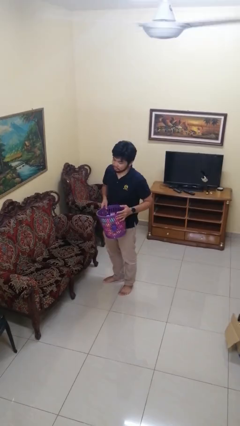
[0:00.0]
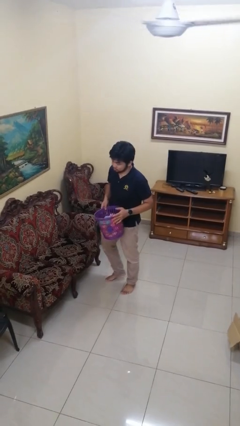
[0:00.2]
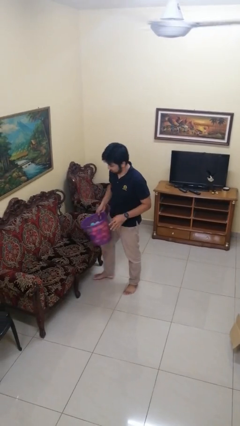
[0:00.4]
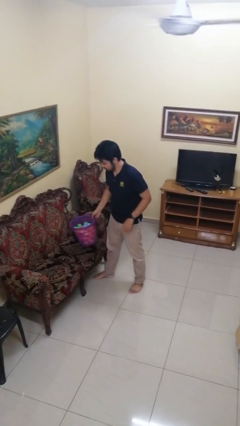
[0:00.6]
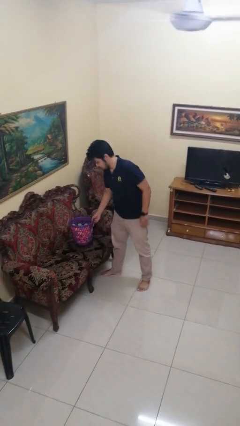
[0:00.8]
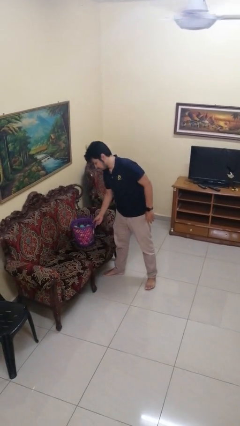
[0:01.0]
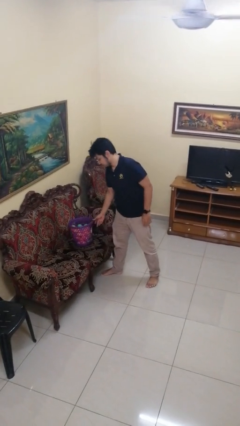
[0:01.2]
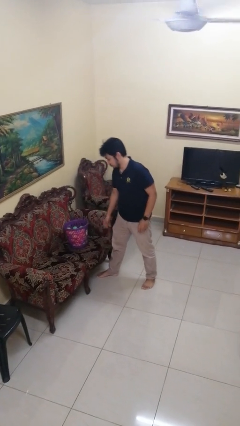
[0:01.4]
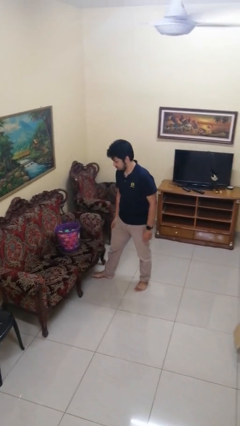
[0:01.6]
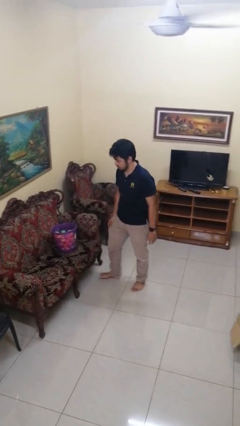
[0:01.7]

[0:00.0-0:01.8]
person puts down object on couch

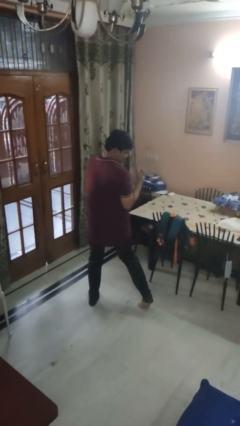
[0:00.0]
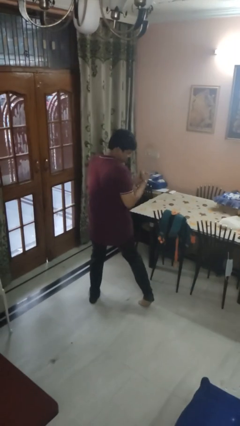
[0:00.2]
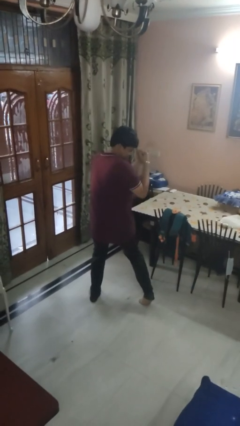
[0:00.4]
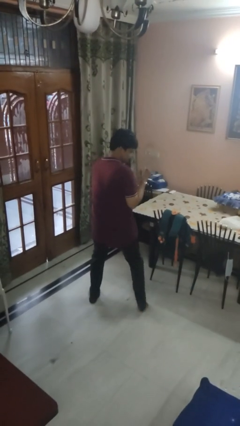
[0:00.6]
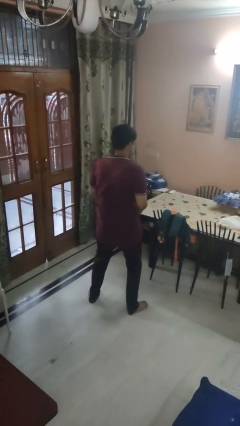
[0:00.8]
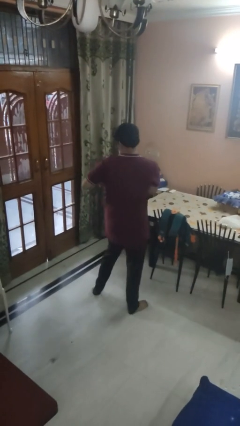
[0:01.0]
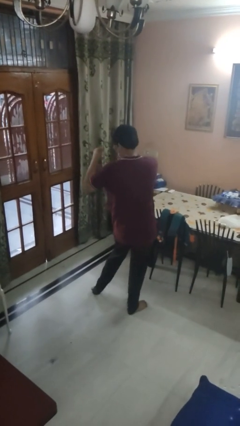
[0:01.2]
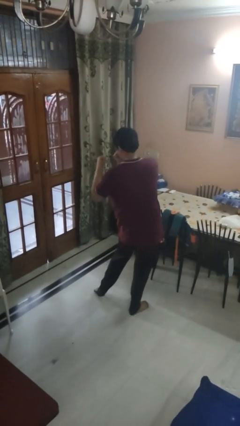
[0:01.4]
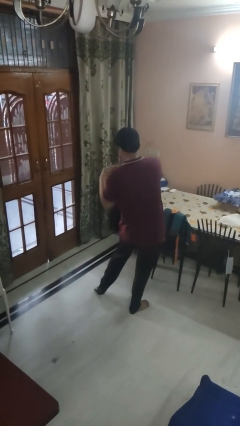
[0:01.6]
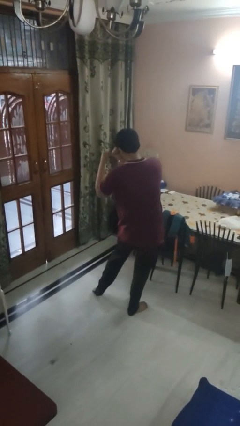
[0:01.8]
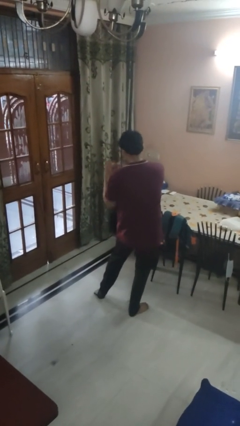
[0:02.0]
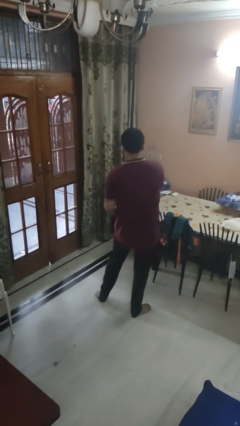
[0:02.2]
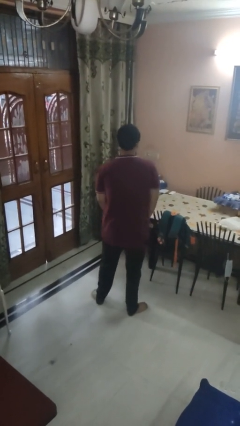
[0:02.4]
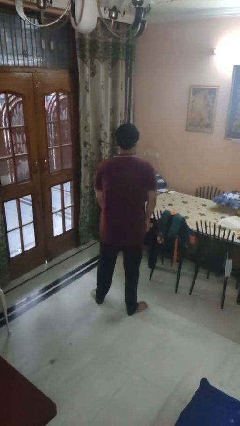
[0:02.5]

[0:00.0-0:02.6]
person dances in place

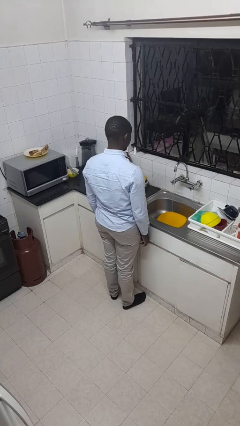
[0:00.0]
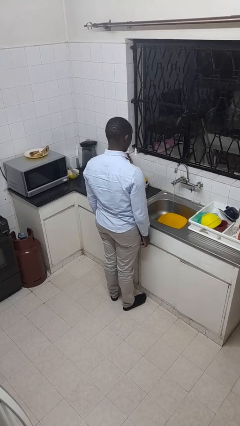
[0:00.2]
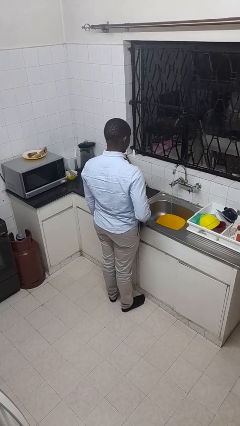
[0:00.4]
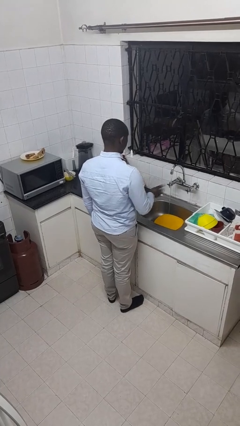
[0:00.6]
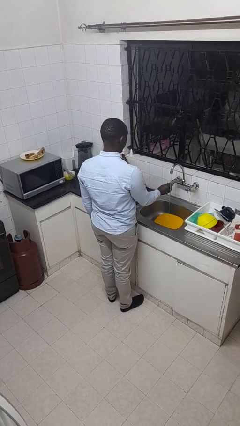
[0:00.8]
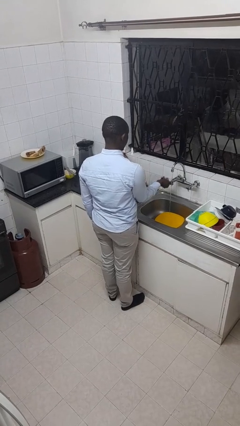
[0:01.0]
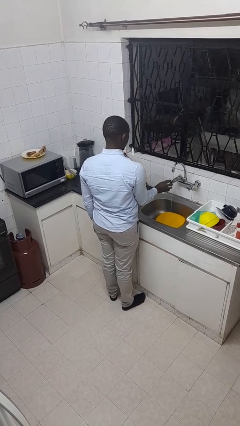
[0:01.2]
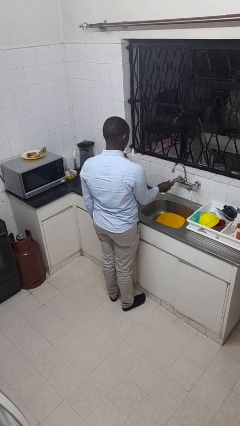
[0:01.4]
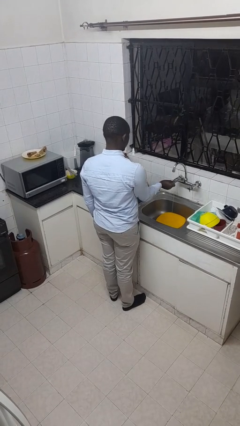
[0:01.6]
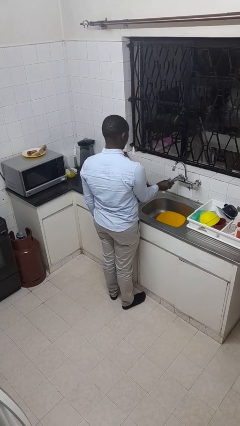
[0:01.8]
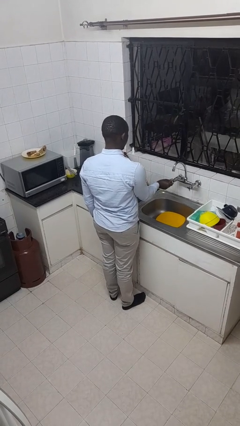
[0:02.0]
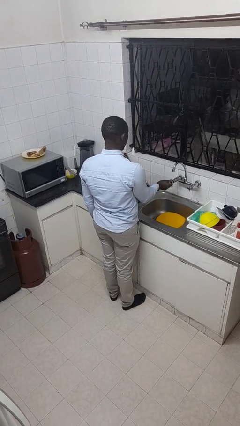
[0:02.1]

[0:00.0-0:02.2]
person turns off faucet

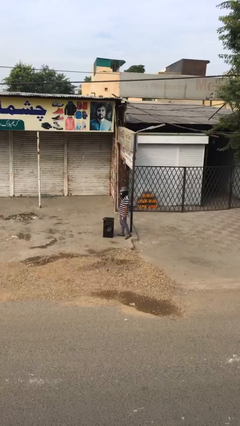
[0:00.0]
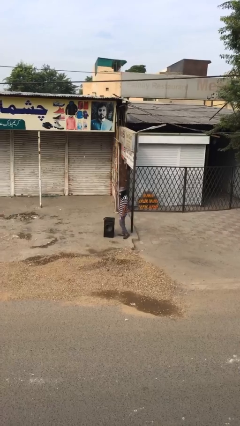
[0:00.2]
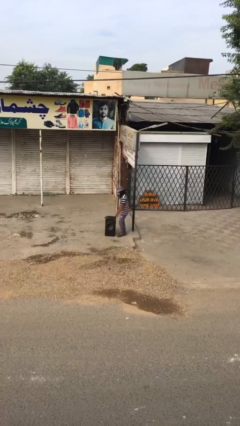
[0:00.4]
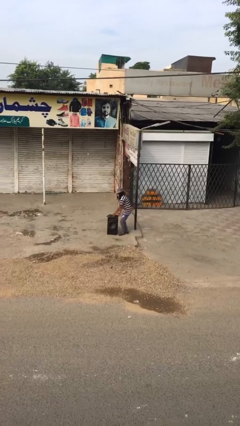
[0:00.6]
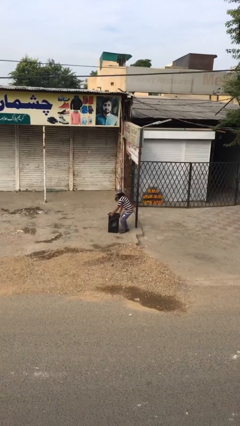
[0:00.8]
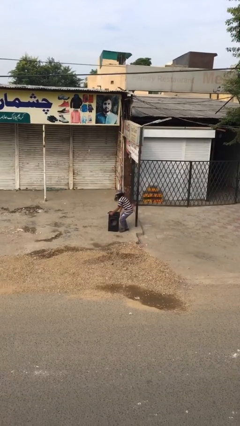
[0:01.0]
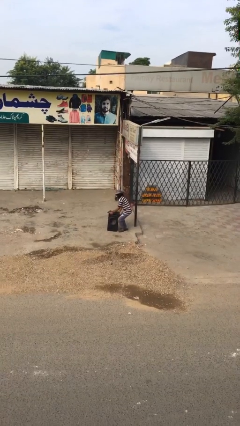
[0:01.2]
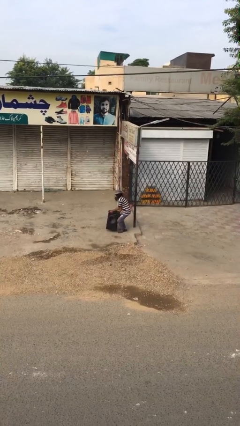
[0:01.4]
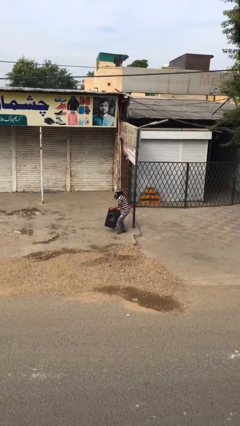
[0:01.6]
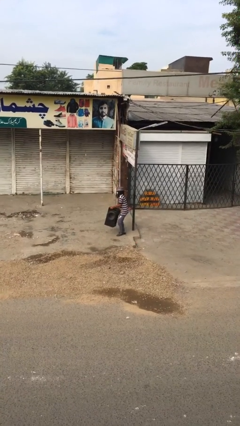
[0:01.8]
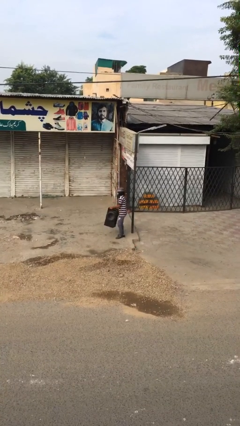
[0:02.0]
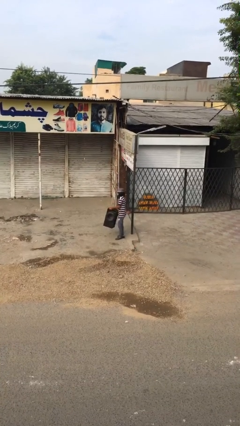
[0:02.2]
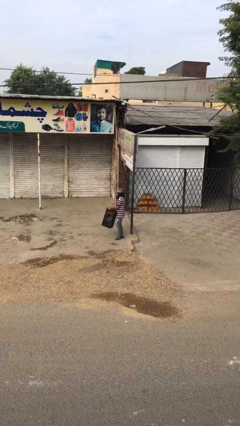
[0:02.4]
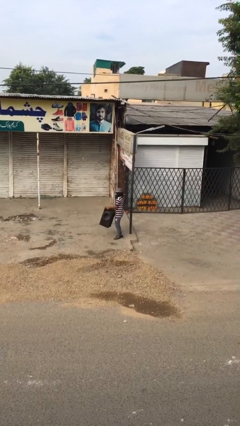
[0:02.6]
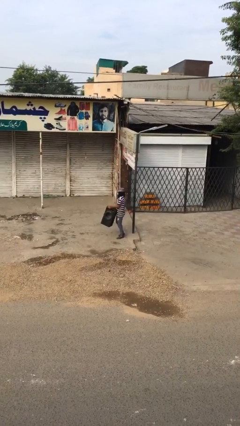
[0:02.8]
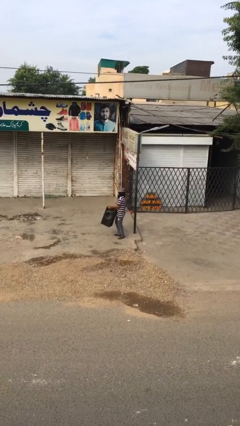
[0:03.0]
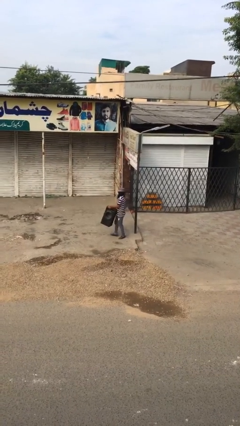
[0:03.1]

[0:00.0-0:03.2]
person picks up object from floor

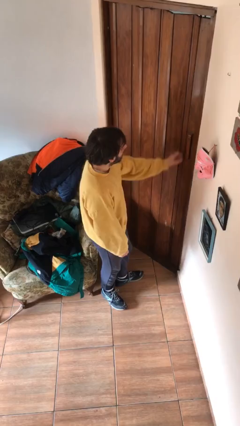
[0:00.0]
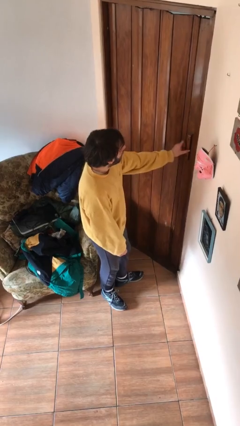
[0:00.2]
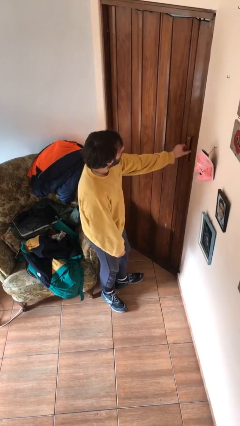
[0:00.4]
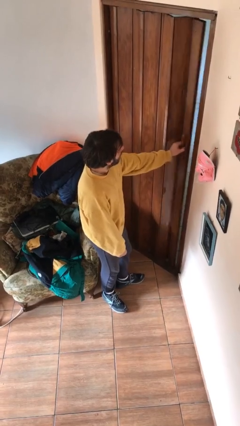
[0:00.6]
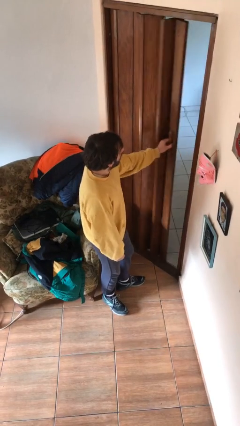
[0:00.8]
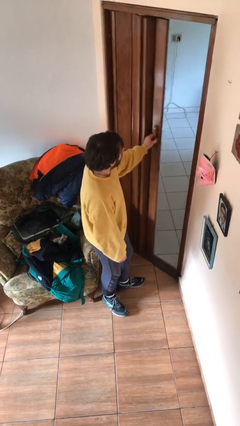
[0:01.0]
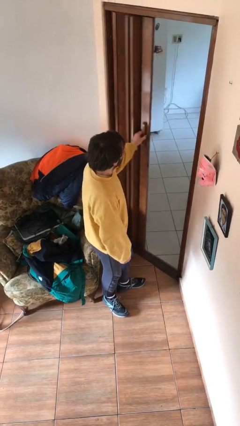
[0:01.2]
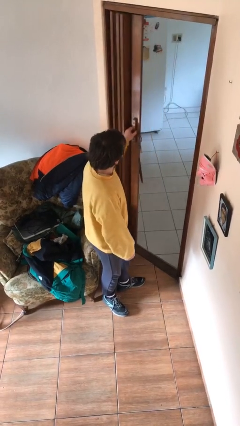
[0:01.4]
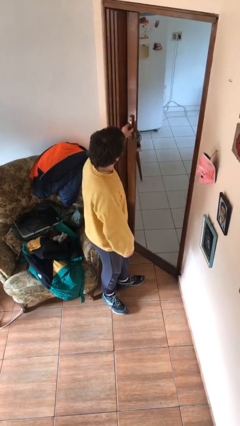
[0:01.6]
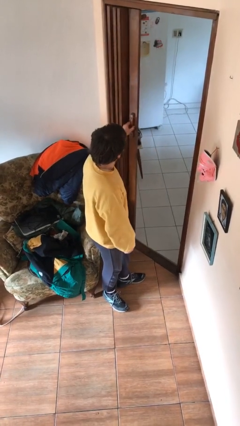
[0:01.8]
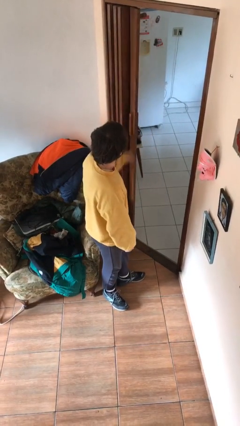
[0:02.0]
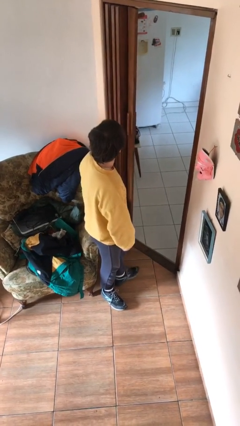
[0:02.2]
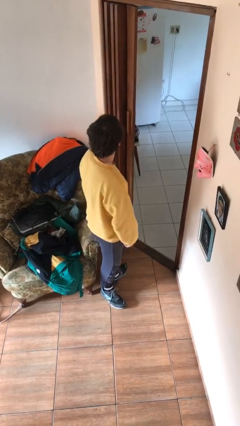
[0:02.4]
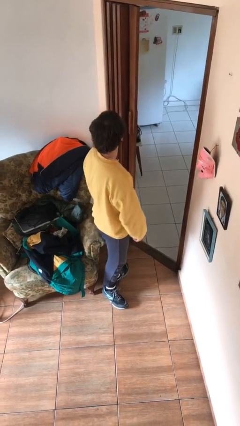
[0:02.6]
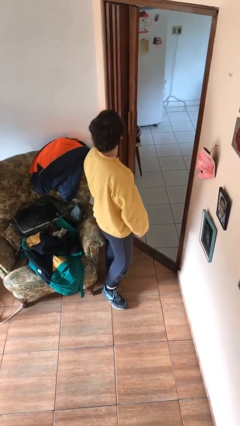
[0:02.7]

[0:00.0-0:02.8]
person opens sliding door

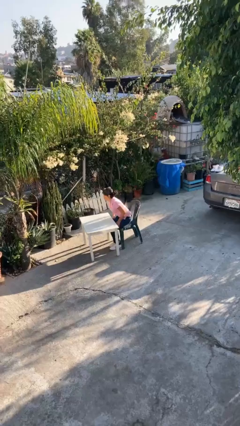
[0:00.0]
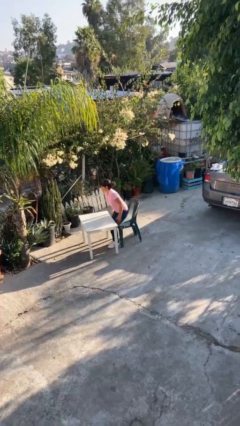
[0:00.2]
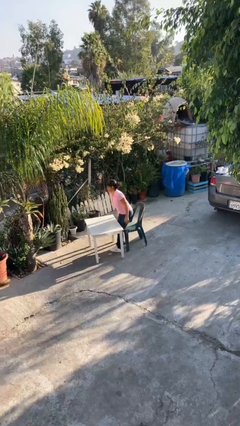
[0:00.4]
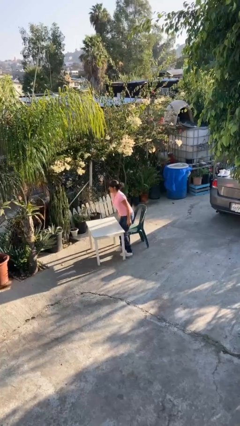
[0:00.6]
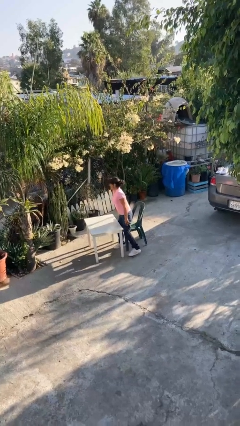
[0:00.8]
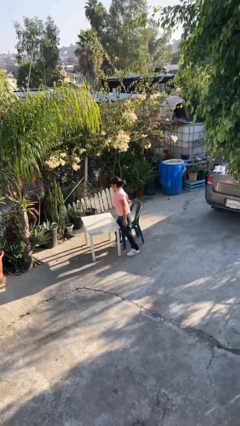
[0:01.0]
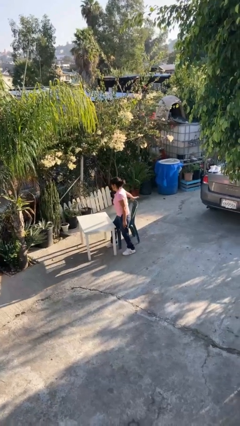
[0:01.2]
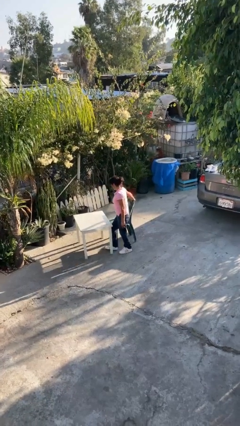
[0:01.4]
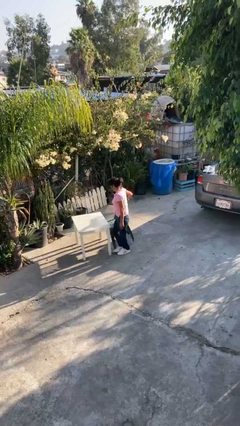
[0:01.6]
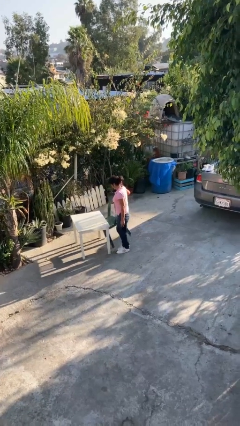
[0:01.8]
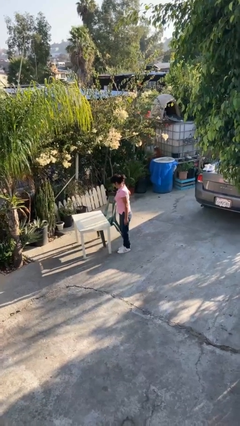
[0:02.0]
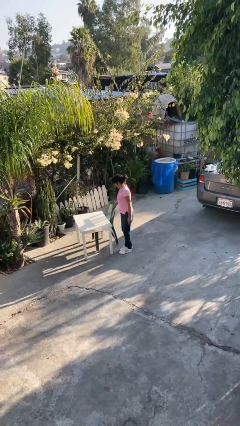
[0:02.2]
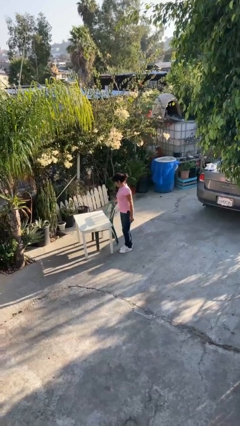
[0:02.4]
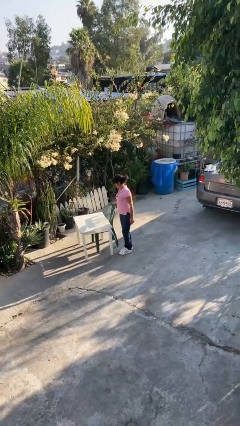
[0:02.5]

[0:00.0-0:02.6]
person stands up

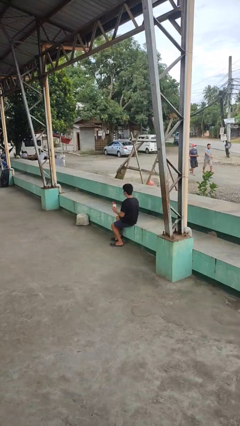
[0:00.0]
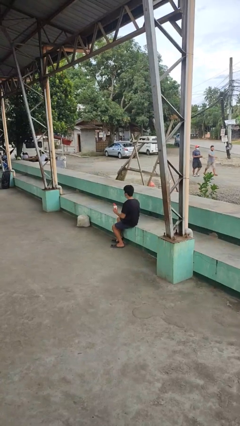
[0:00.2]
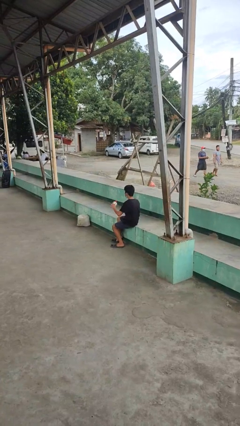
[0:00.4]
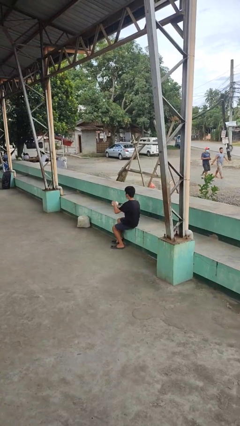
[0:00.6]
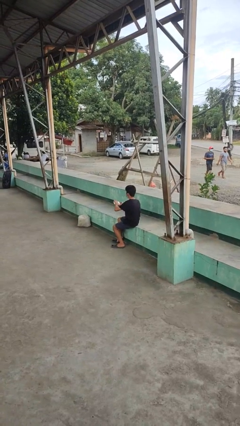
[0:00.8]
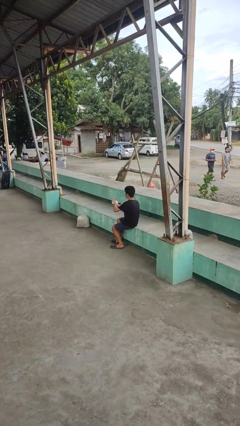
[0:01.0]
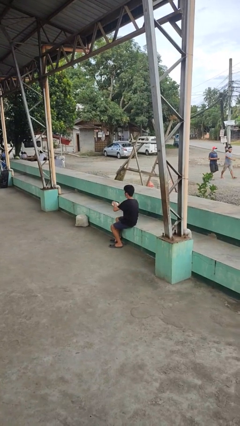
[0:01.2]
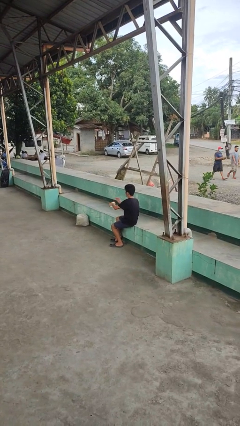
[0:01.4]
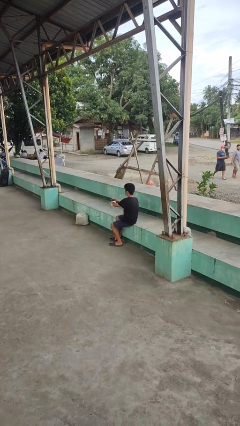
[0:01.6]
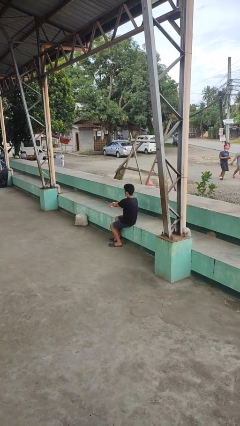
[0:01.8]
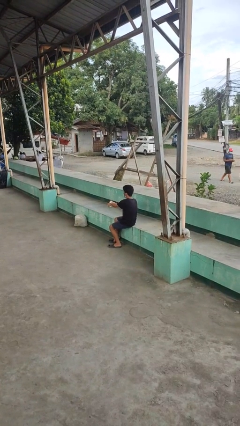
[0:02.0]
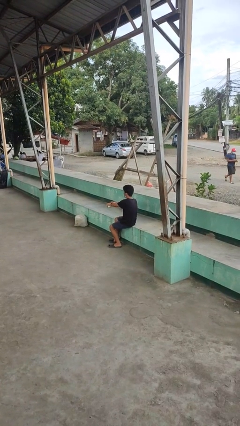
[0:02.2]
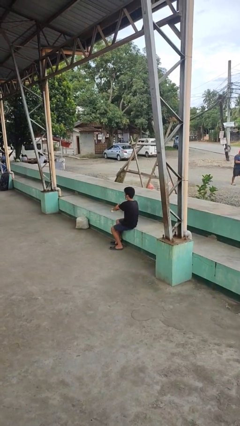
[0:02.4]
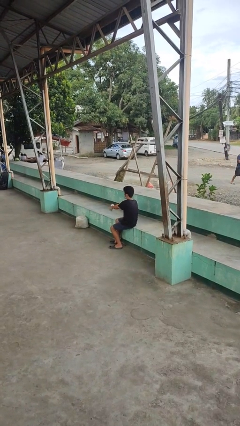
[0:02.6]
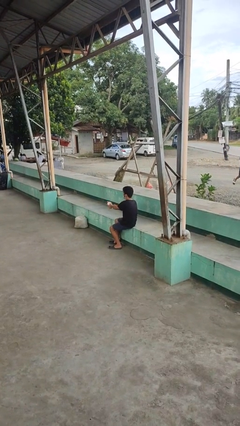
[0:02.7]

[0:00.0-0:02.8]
person applies sunscreen
